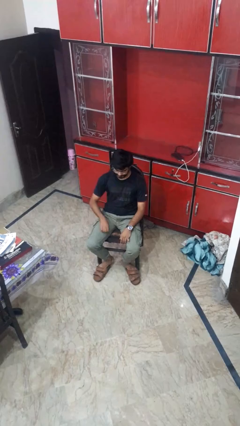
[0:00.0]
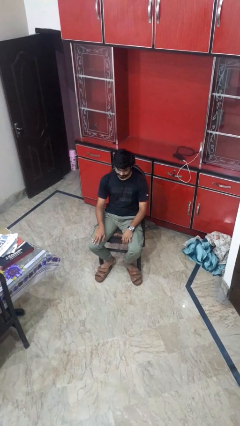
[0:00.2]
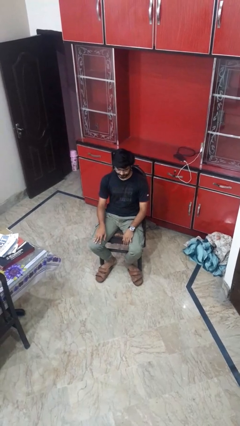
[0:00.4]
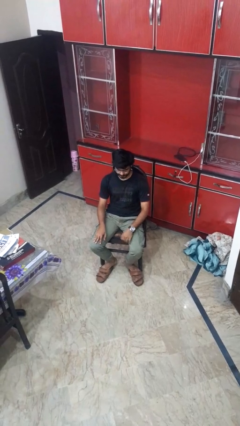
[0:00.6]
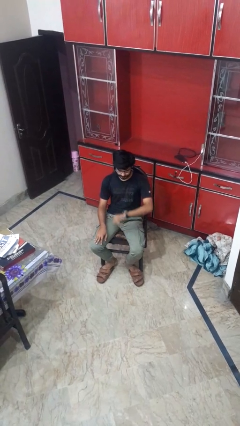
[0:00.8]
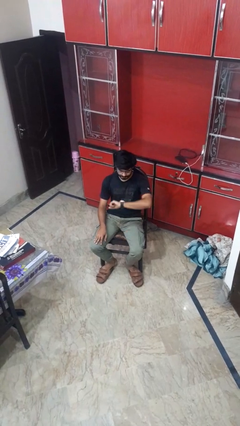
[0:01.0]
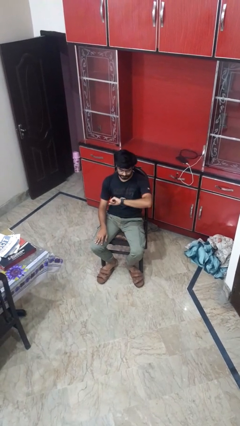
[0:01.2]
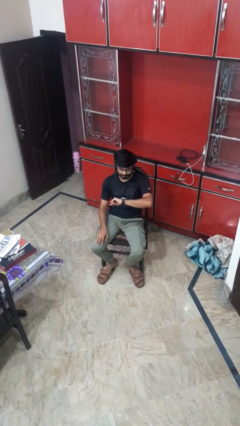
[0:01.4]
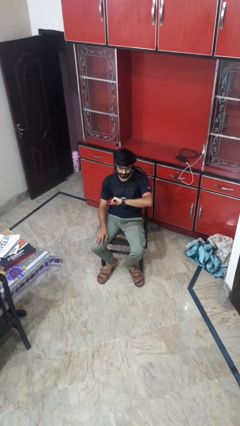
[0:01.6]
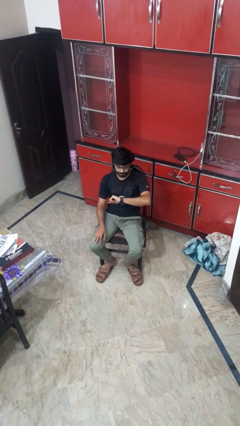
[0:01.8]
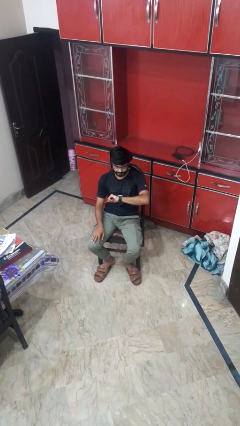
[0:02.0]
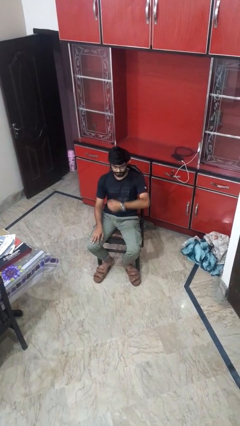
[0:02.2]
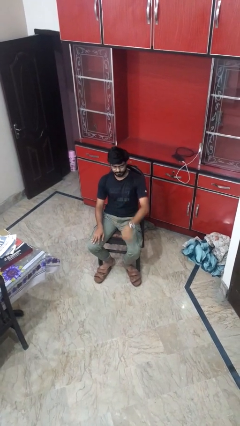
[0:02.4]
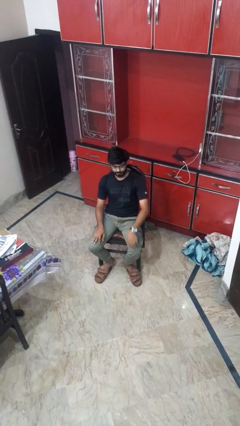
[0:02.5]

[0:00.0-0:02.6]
person looks at wristwatch

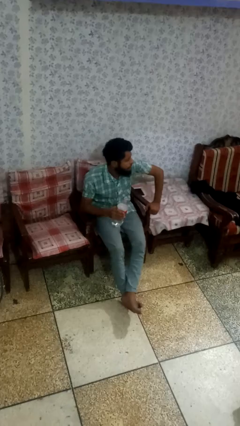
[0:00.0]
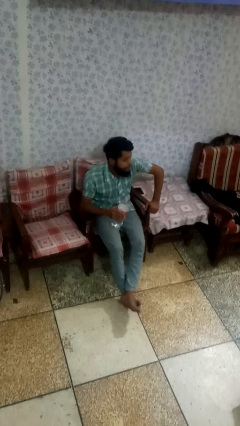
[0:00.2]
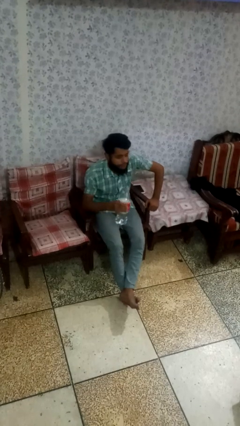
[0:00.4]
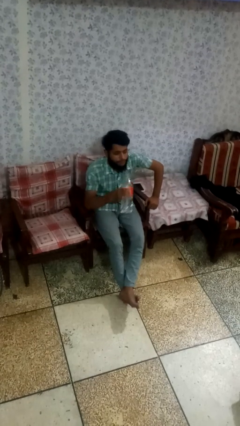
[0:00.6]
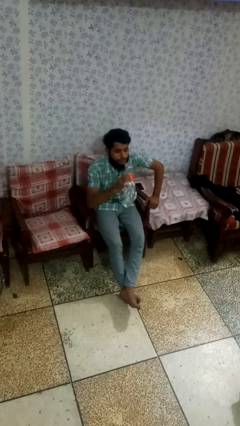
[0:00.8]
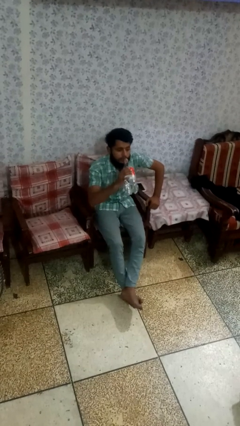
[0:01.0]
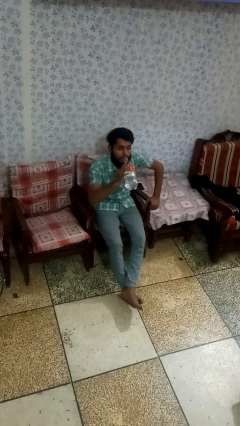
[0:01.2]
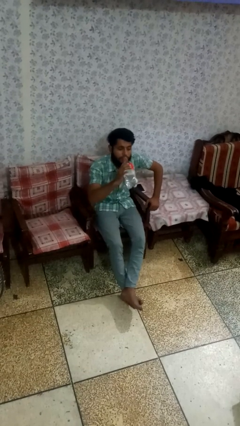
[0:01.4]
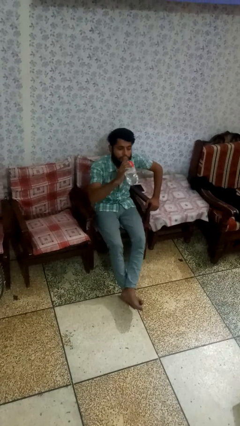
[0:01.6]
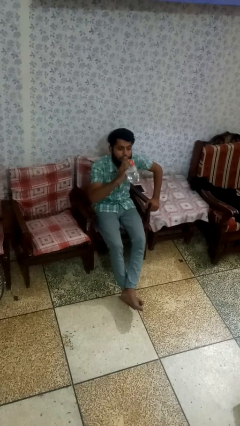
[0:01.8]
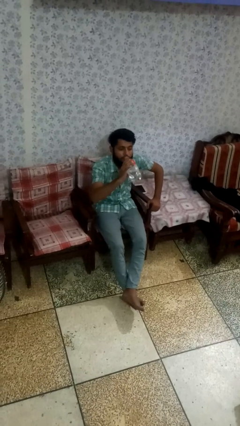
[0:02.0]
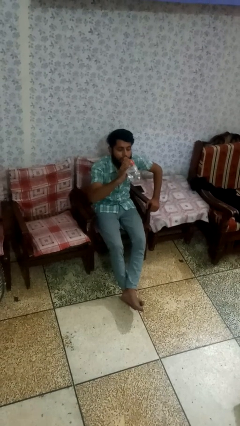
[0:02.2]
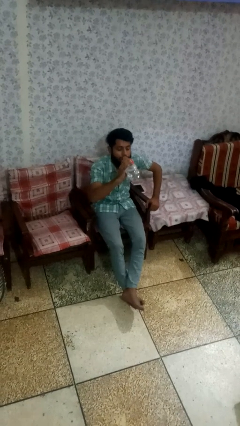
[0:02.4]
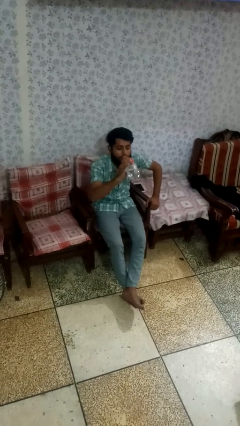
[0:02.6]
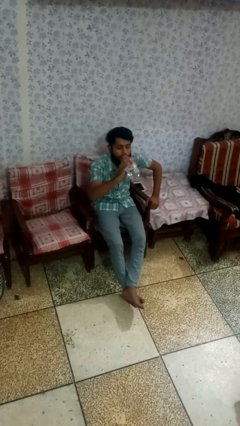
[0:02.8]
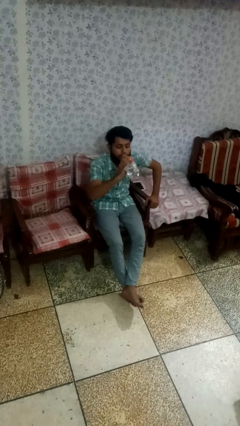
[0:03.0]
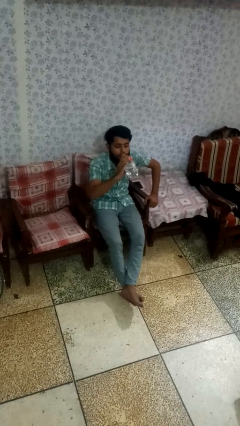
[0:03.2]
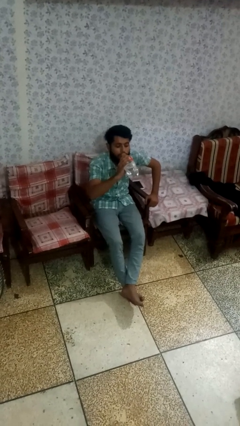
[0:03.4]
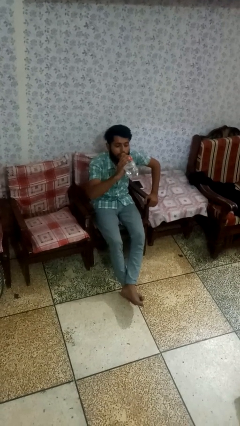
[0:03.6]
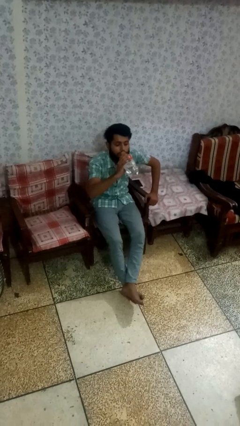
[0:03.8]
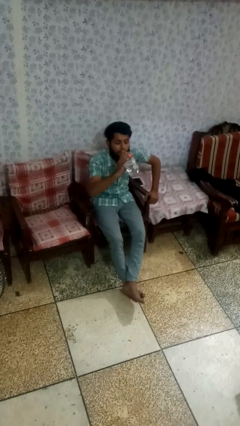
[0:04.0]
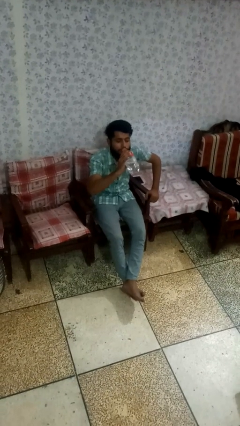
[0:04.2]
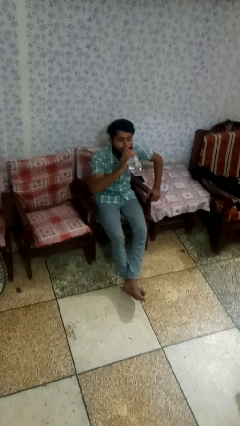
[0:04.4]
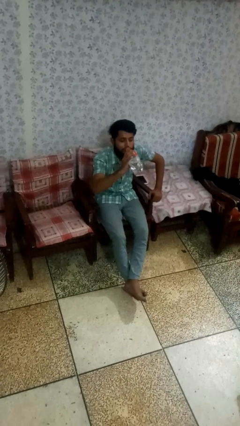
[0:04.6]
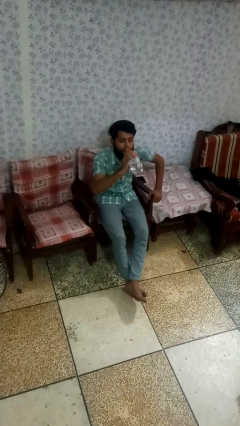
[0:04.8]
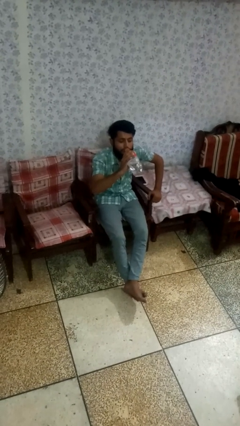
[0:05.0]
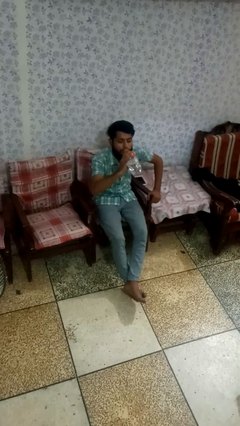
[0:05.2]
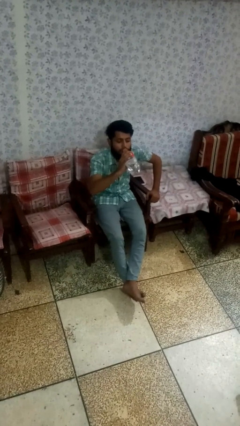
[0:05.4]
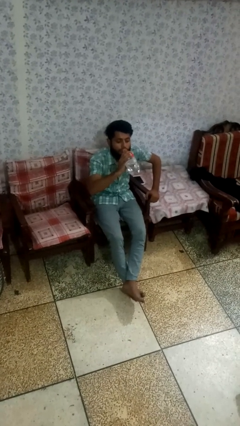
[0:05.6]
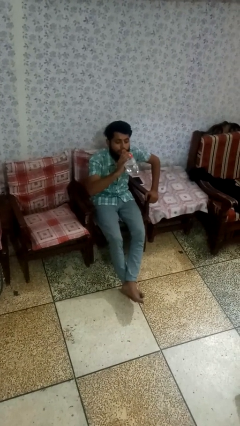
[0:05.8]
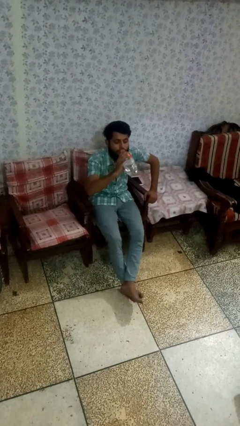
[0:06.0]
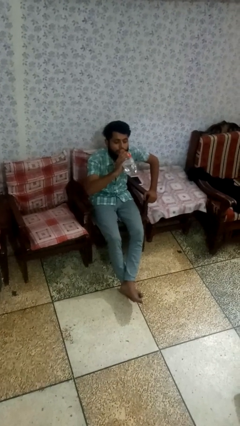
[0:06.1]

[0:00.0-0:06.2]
person drinks from bottle

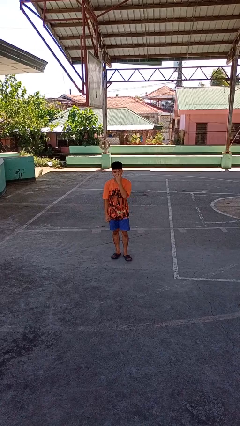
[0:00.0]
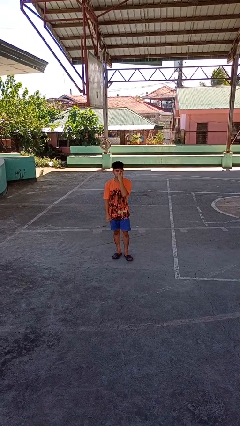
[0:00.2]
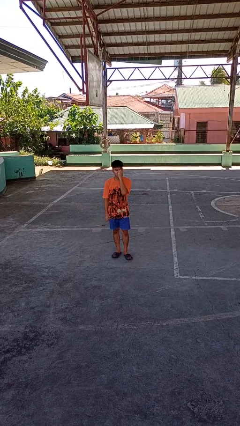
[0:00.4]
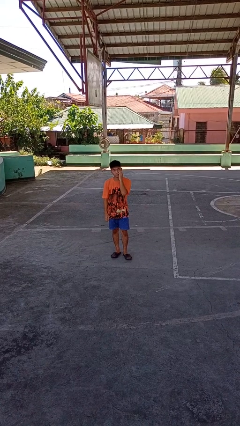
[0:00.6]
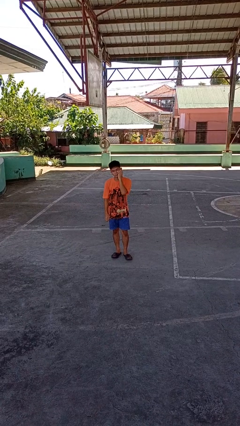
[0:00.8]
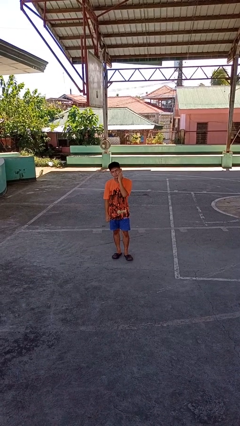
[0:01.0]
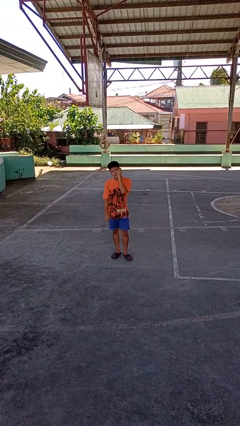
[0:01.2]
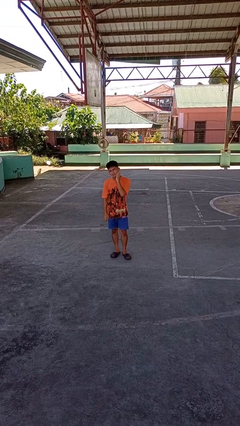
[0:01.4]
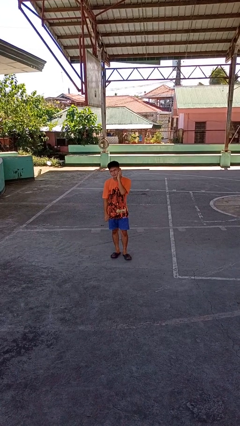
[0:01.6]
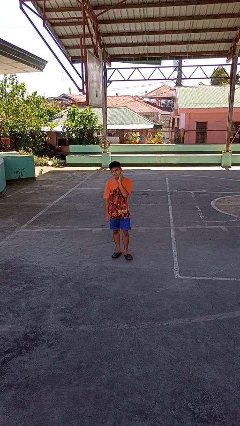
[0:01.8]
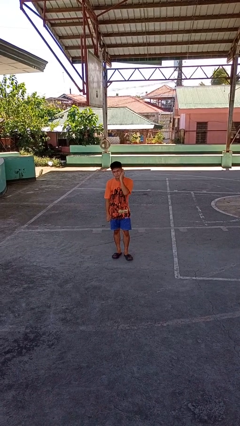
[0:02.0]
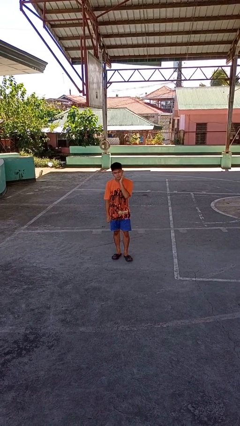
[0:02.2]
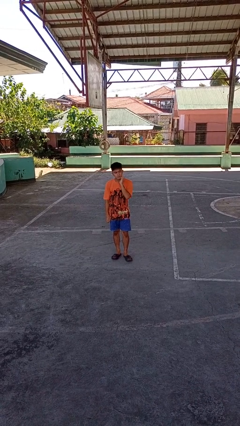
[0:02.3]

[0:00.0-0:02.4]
person scratches face

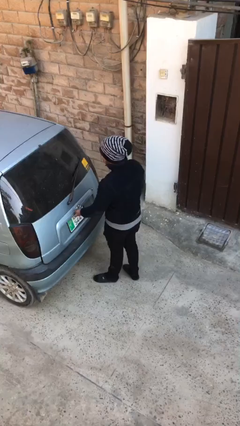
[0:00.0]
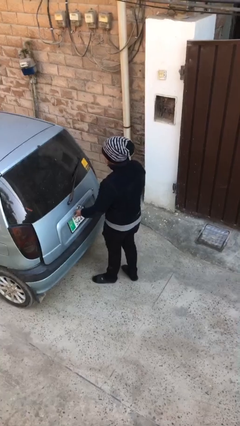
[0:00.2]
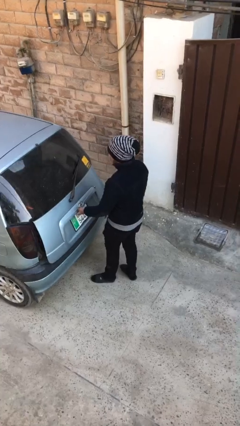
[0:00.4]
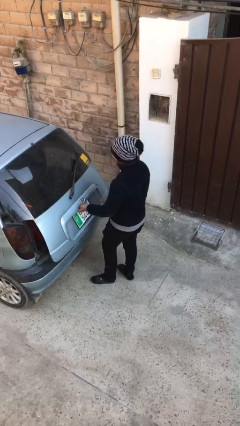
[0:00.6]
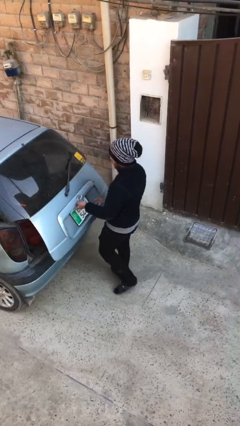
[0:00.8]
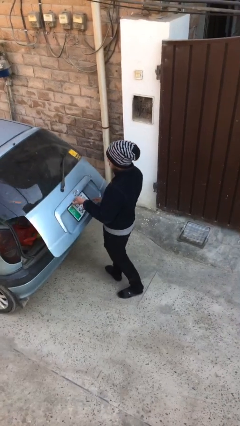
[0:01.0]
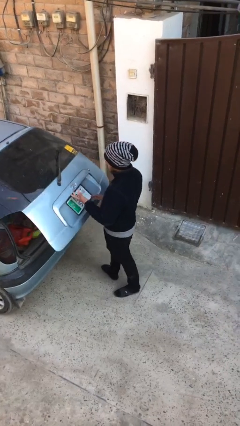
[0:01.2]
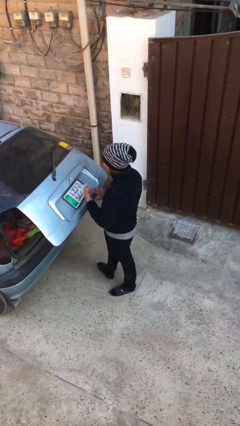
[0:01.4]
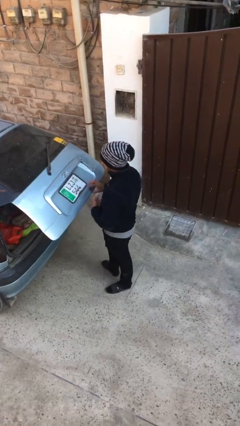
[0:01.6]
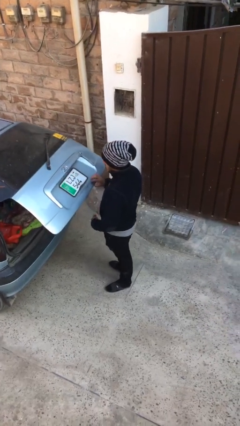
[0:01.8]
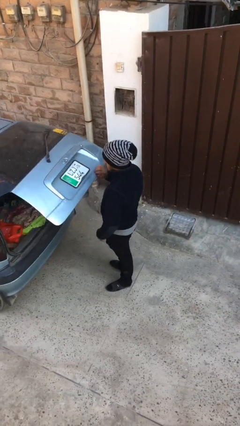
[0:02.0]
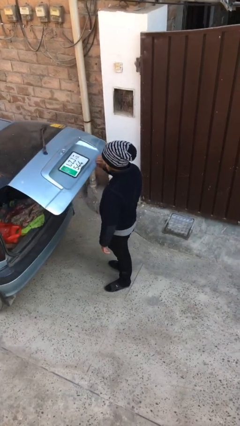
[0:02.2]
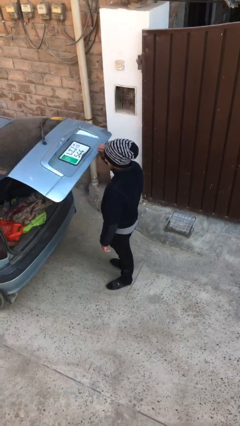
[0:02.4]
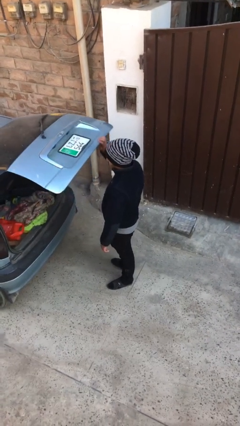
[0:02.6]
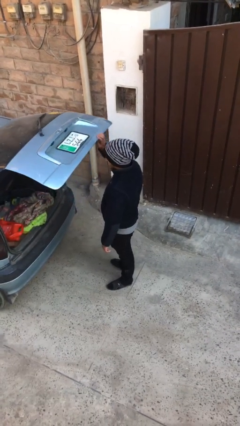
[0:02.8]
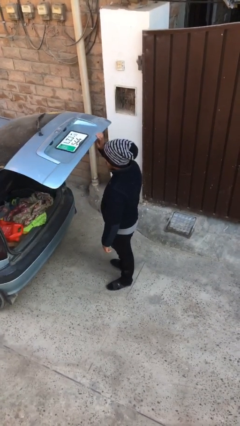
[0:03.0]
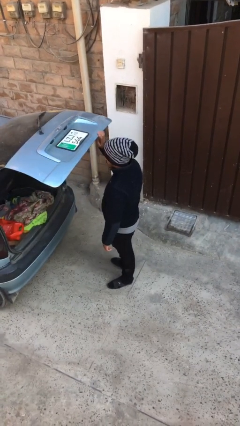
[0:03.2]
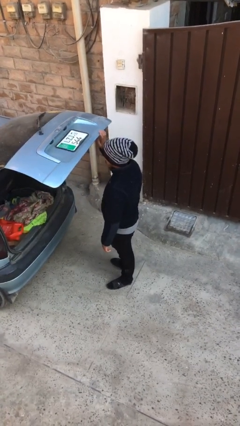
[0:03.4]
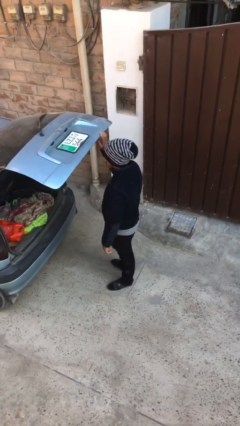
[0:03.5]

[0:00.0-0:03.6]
person opens car trunk

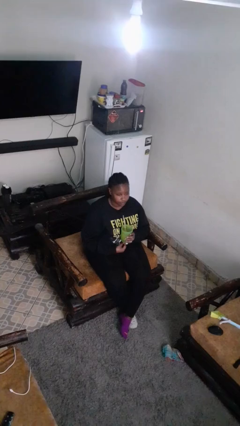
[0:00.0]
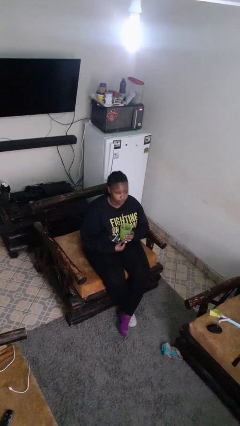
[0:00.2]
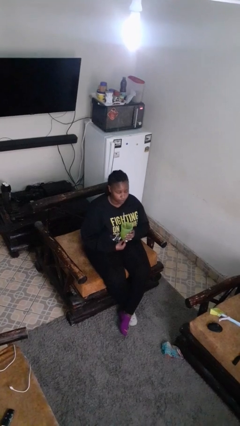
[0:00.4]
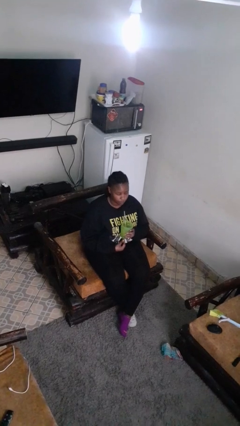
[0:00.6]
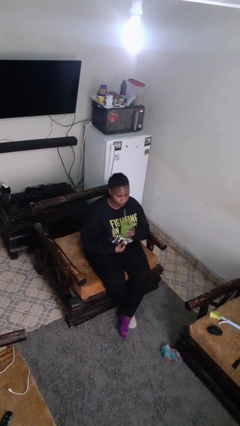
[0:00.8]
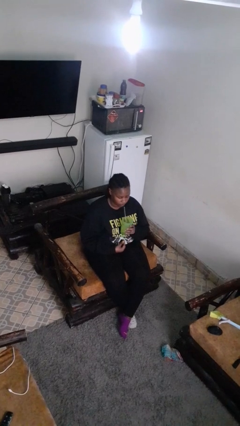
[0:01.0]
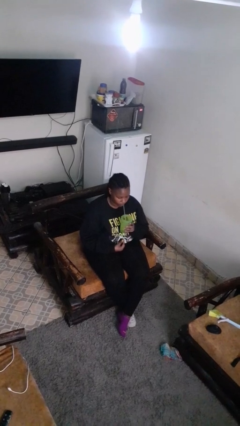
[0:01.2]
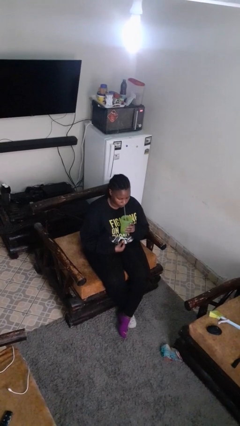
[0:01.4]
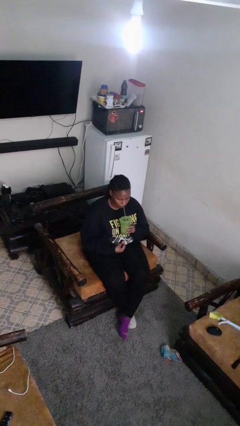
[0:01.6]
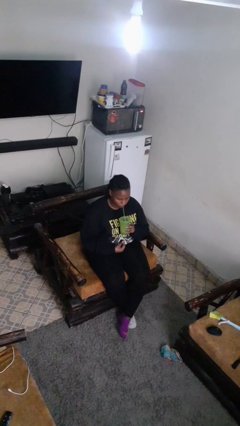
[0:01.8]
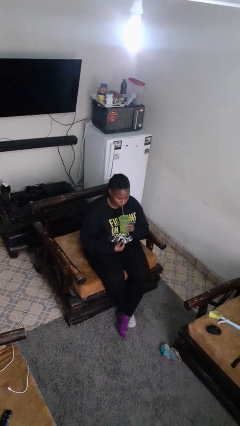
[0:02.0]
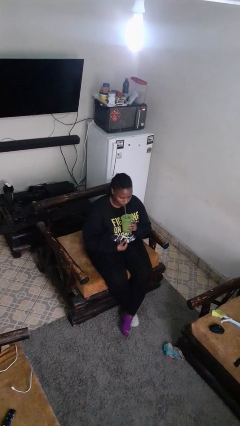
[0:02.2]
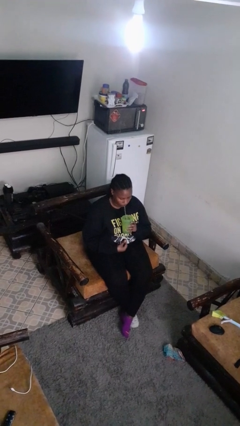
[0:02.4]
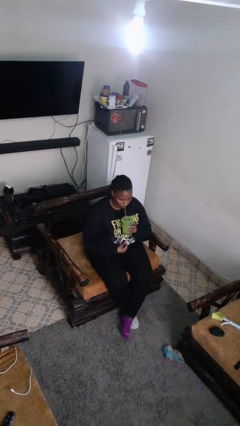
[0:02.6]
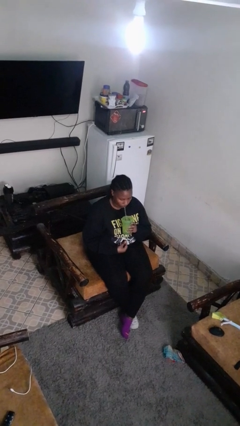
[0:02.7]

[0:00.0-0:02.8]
person drinks from straw
